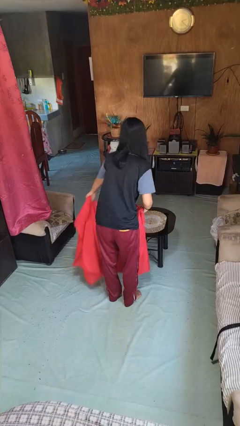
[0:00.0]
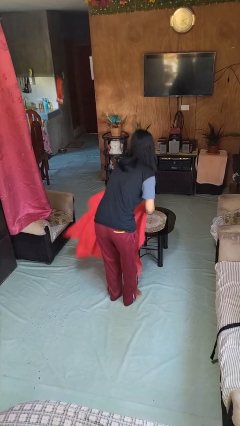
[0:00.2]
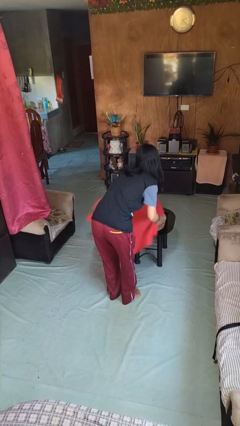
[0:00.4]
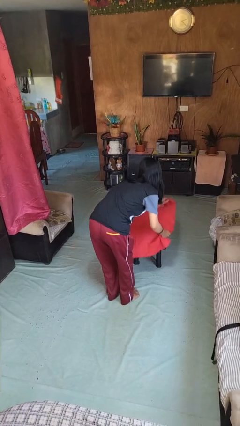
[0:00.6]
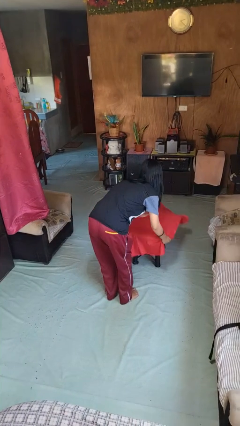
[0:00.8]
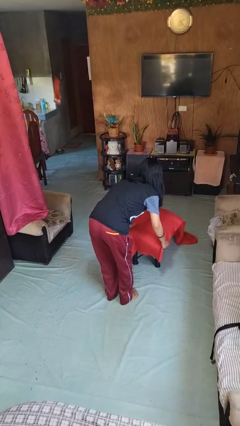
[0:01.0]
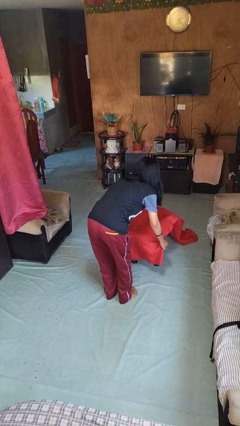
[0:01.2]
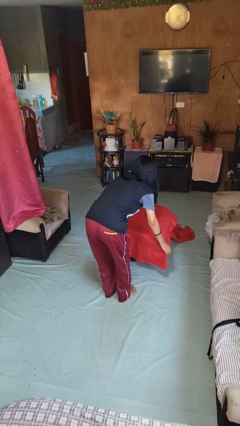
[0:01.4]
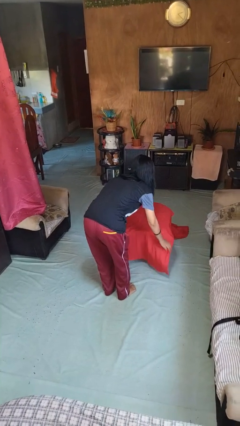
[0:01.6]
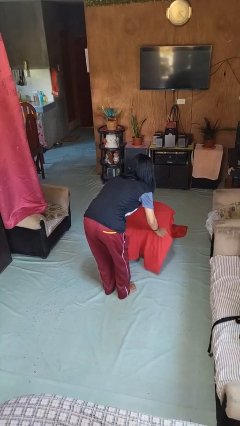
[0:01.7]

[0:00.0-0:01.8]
person spreads tablecloth

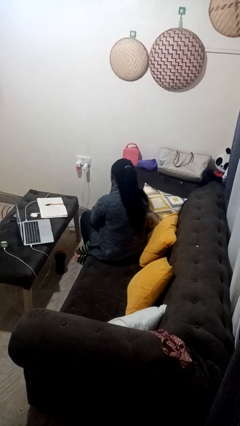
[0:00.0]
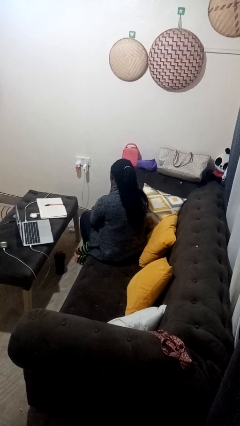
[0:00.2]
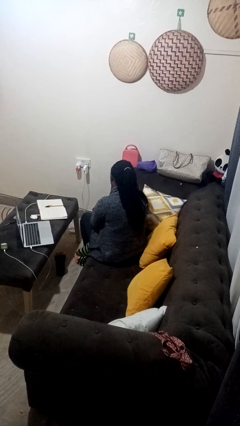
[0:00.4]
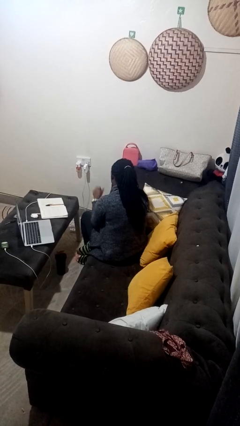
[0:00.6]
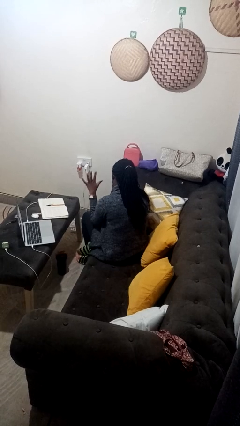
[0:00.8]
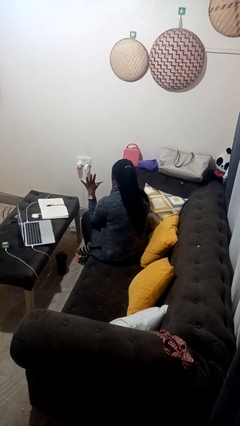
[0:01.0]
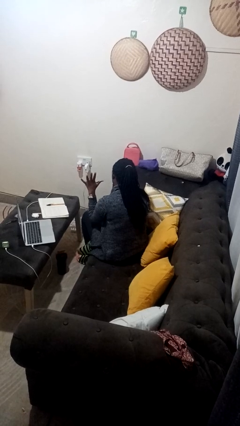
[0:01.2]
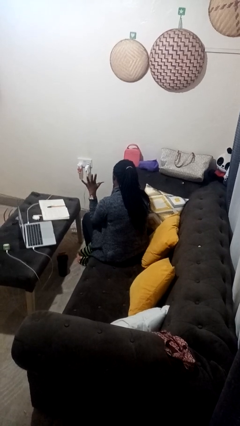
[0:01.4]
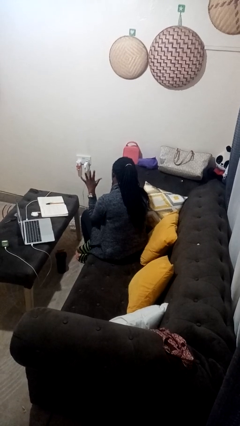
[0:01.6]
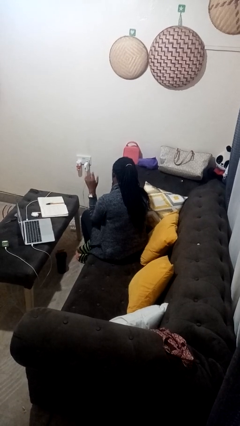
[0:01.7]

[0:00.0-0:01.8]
person gestures number five

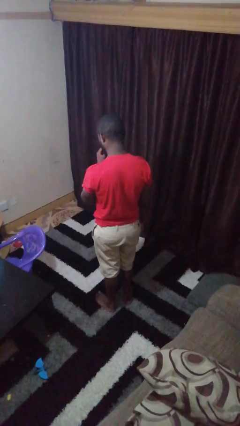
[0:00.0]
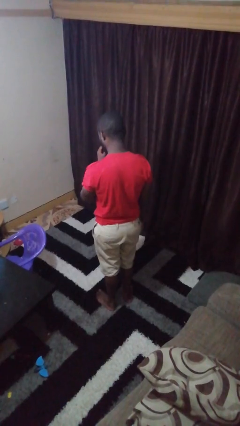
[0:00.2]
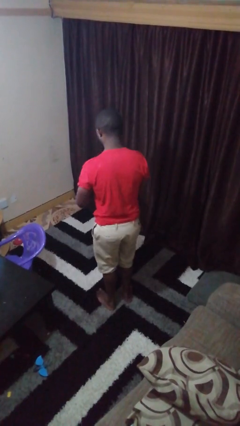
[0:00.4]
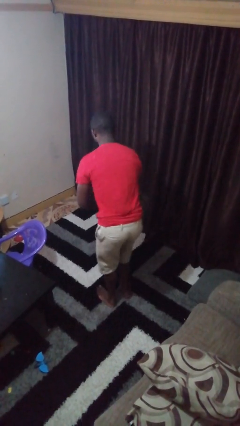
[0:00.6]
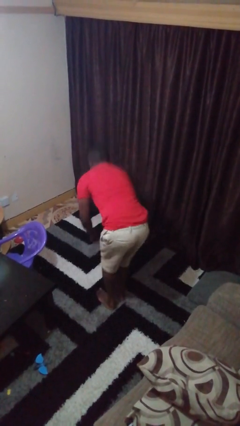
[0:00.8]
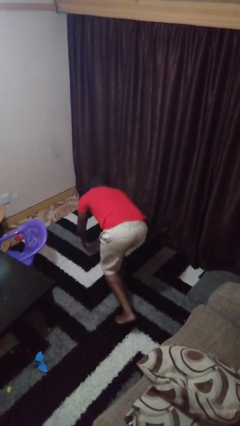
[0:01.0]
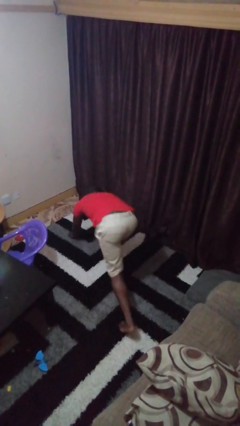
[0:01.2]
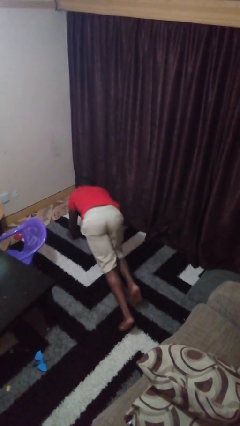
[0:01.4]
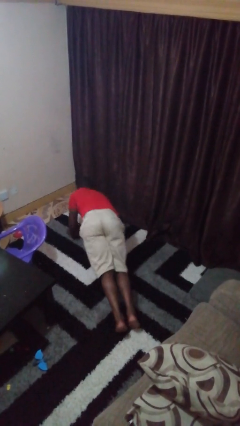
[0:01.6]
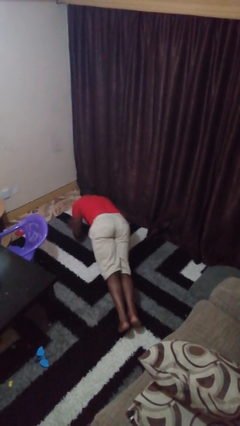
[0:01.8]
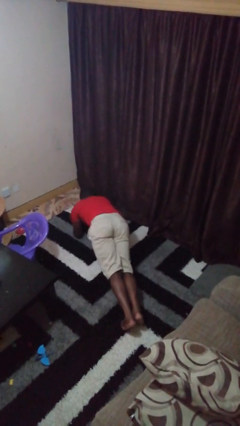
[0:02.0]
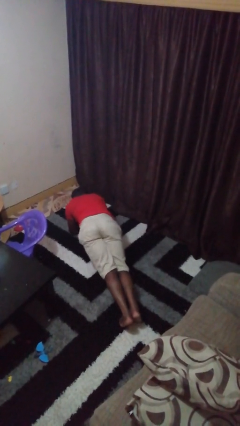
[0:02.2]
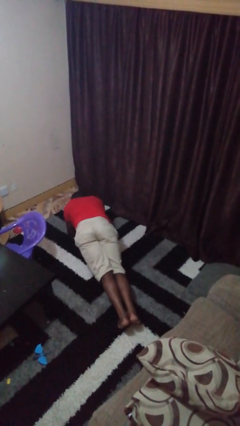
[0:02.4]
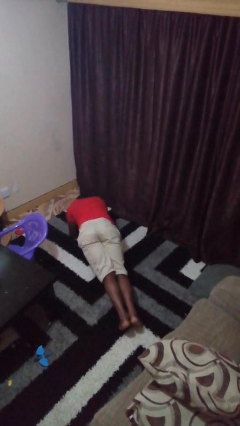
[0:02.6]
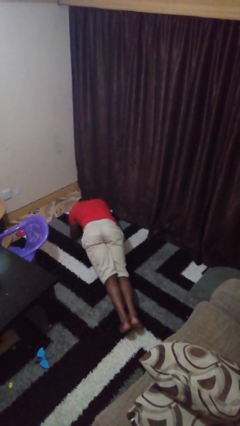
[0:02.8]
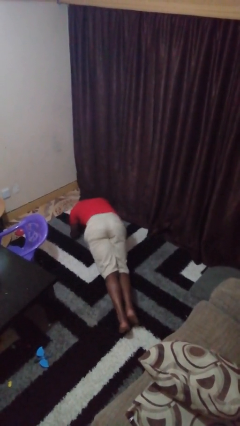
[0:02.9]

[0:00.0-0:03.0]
person exercises with plank

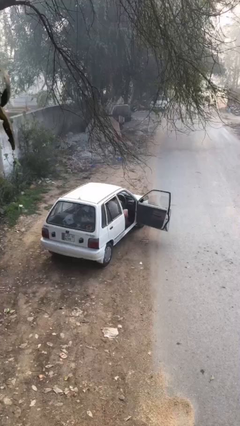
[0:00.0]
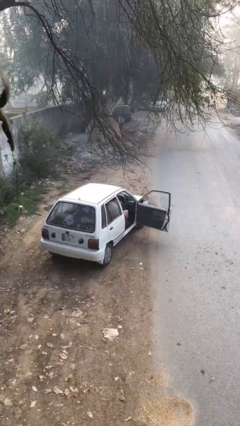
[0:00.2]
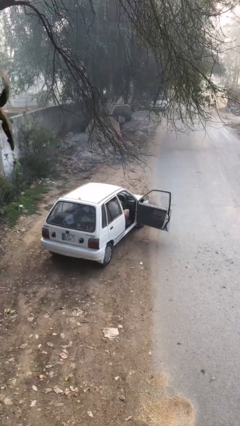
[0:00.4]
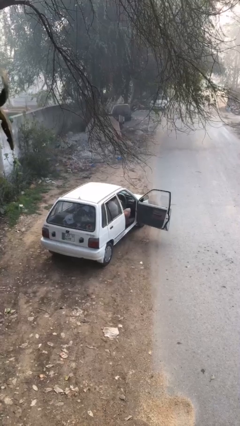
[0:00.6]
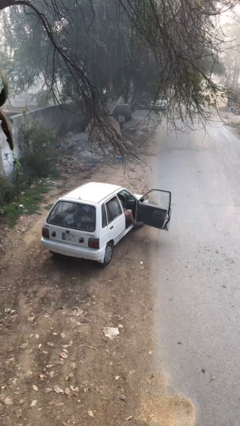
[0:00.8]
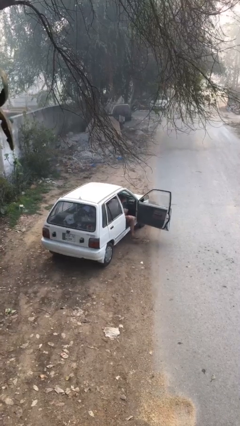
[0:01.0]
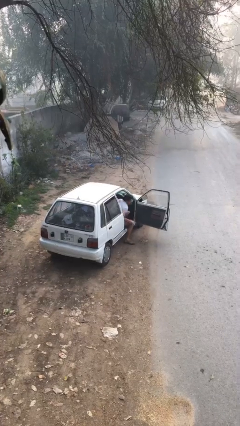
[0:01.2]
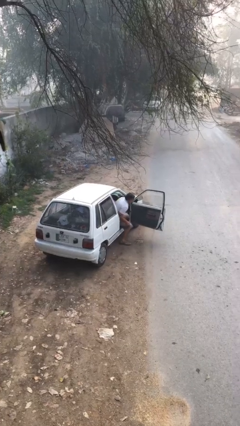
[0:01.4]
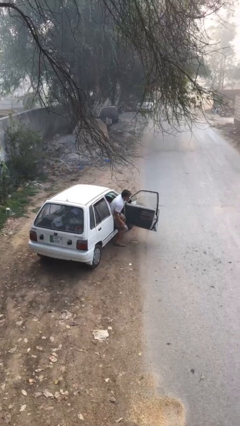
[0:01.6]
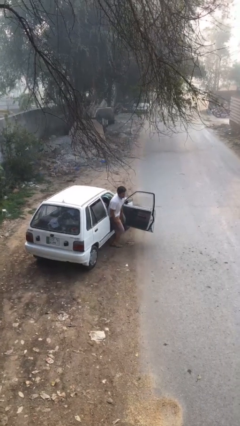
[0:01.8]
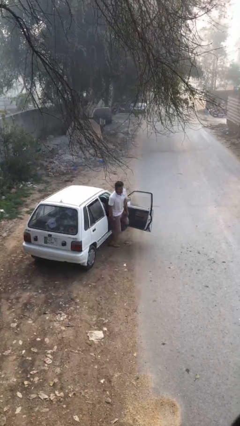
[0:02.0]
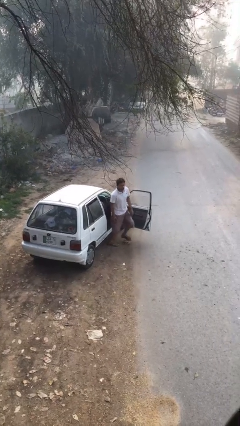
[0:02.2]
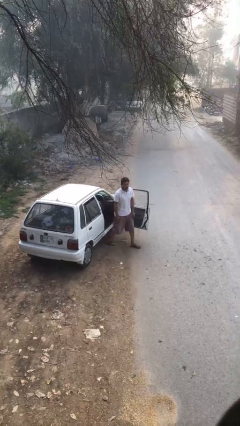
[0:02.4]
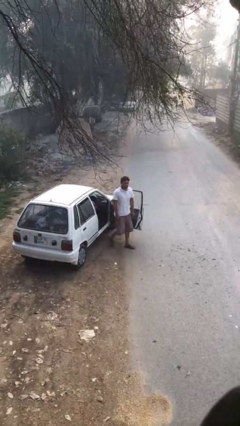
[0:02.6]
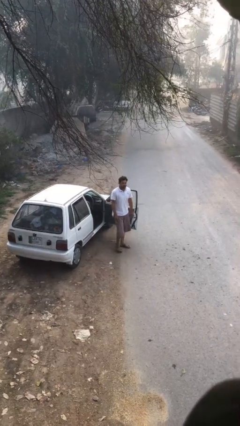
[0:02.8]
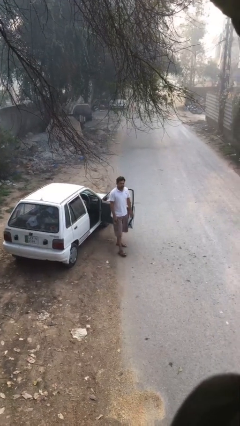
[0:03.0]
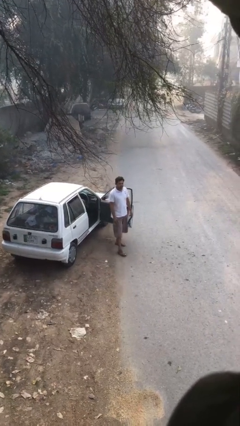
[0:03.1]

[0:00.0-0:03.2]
person exits car

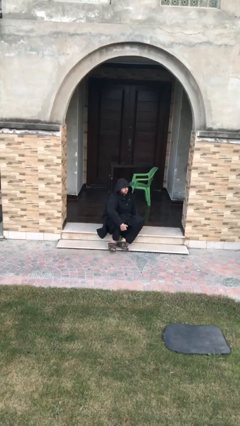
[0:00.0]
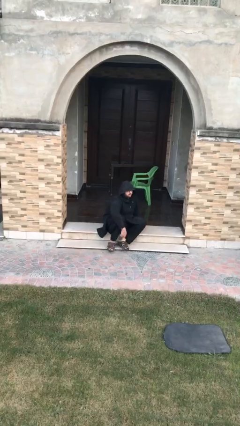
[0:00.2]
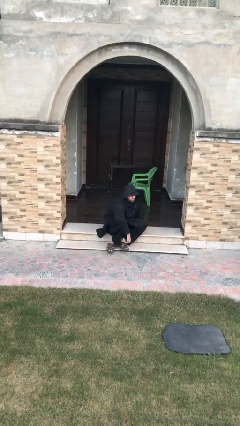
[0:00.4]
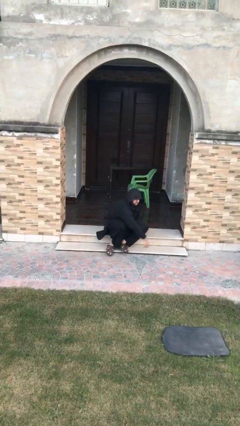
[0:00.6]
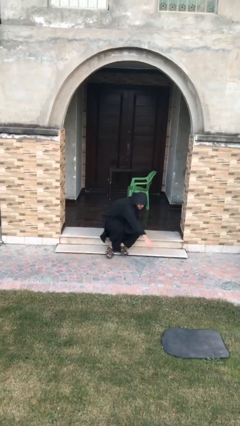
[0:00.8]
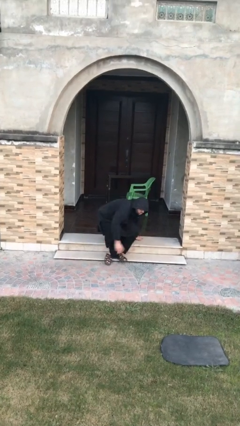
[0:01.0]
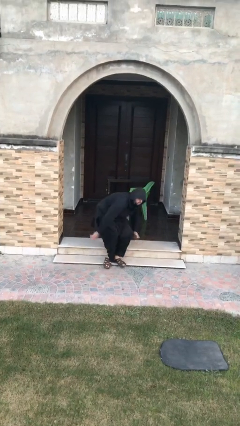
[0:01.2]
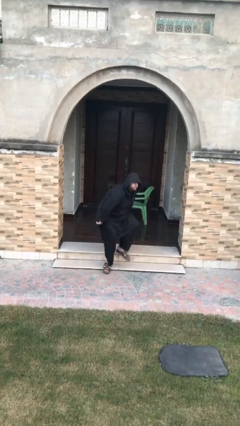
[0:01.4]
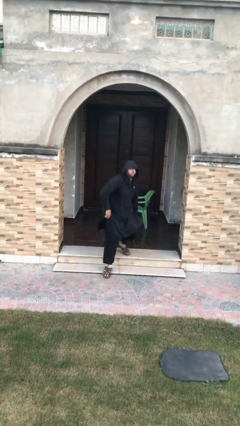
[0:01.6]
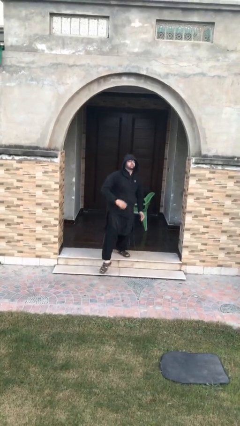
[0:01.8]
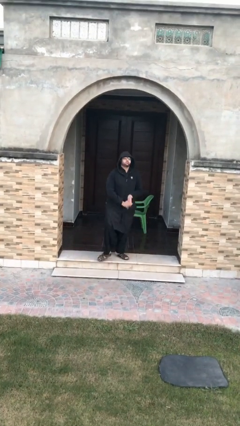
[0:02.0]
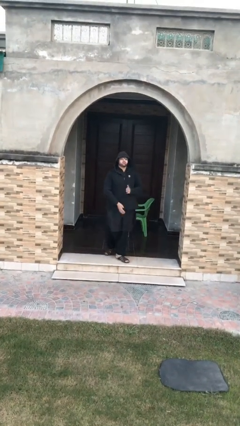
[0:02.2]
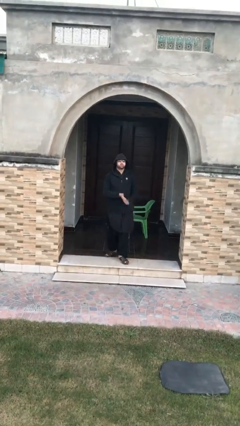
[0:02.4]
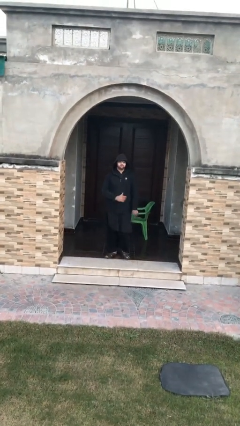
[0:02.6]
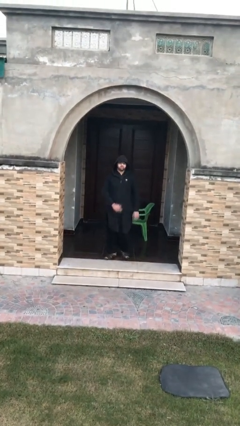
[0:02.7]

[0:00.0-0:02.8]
person stands up

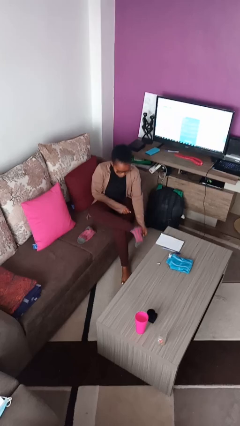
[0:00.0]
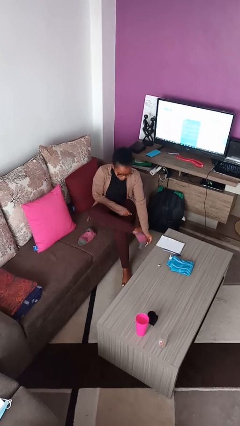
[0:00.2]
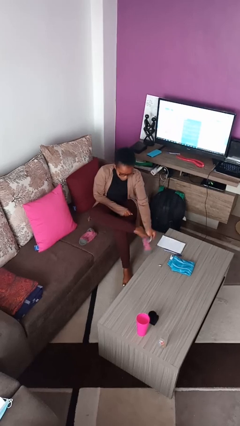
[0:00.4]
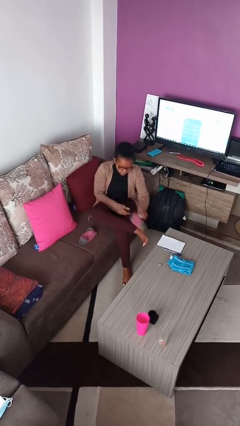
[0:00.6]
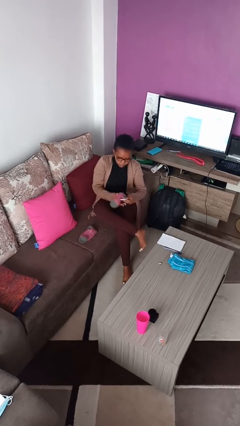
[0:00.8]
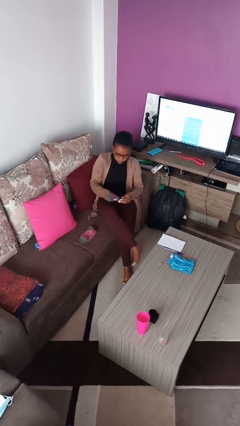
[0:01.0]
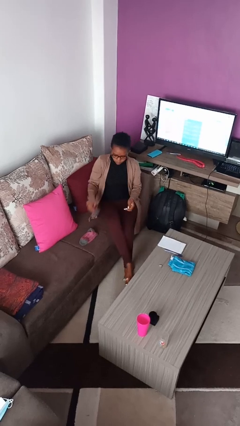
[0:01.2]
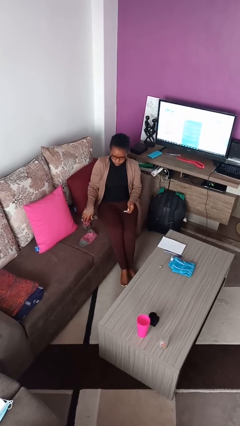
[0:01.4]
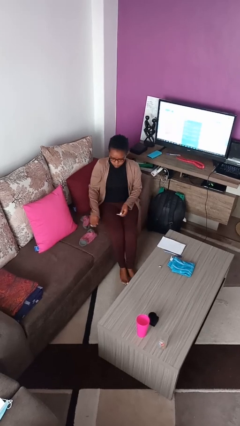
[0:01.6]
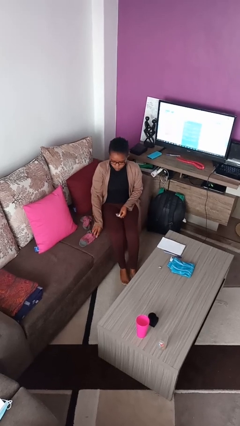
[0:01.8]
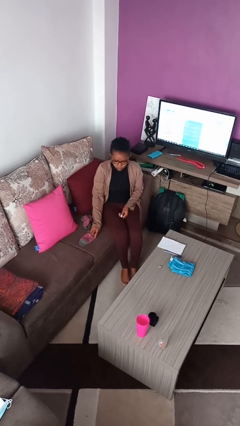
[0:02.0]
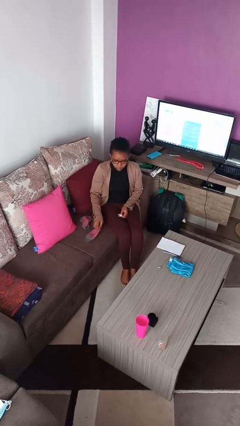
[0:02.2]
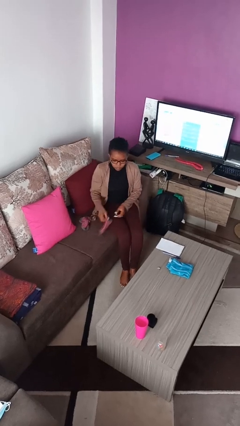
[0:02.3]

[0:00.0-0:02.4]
person takes off socks

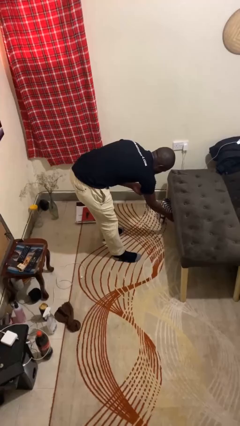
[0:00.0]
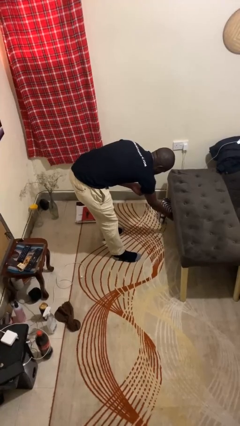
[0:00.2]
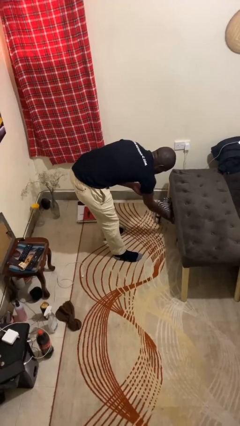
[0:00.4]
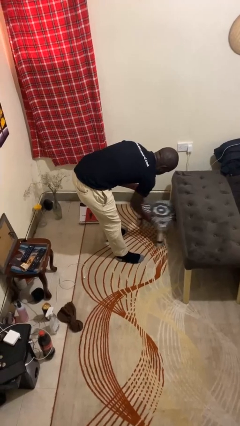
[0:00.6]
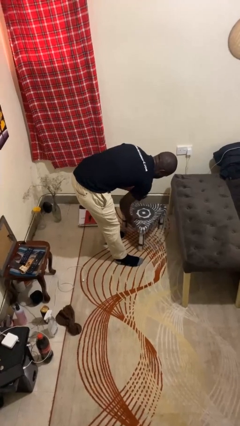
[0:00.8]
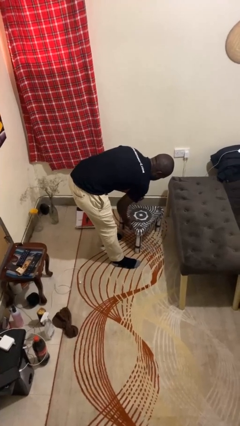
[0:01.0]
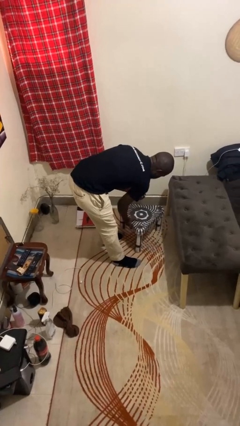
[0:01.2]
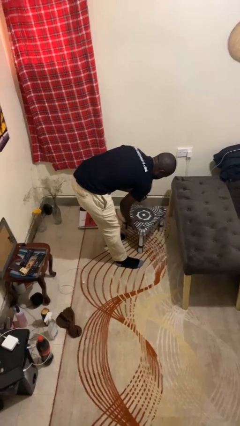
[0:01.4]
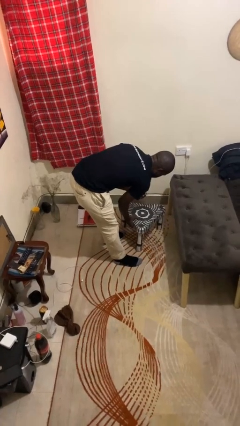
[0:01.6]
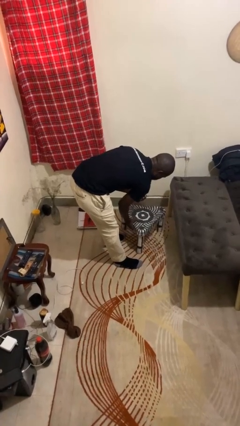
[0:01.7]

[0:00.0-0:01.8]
person pulls out chair

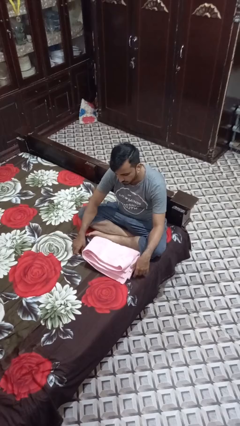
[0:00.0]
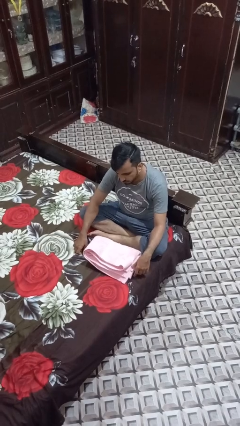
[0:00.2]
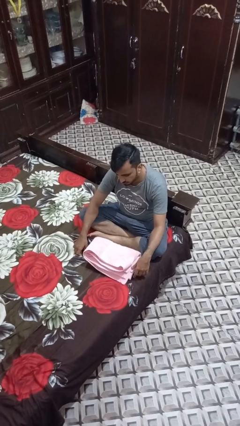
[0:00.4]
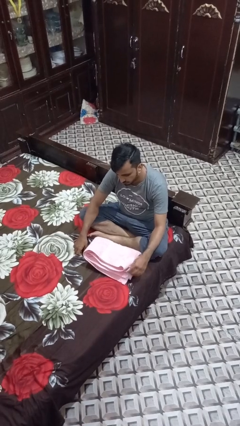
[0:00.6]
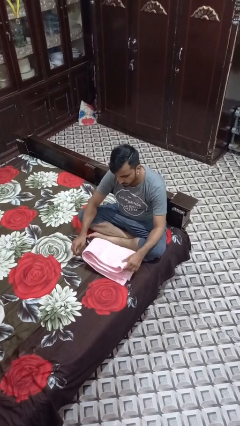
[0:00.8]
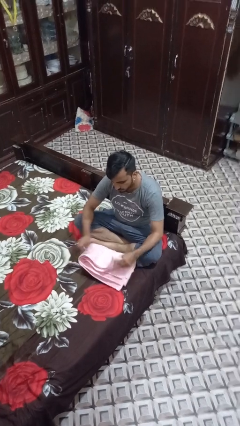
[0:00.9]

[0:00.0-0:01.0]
person folds towel
